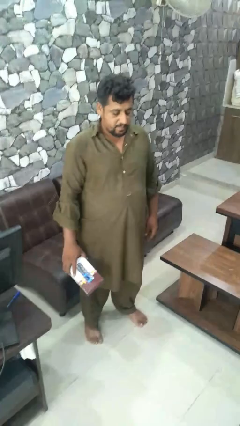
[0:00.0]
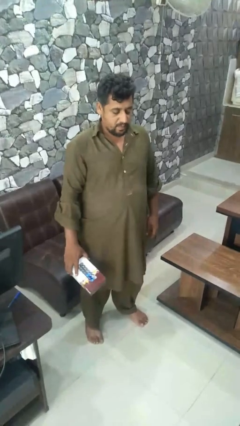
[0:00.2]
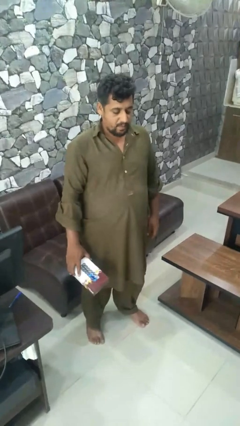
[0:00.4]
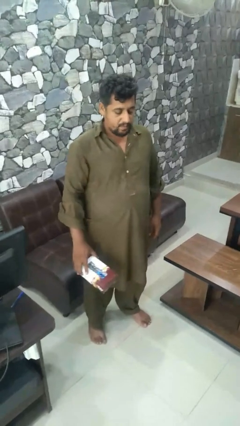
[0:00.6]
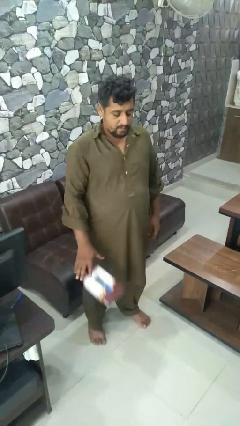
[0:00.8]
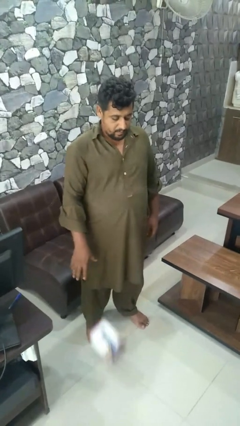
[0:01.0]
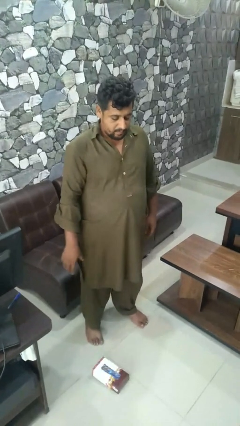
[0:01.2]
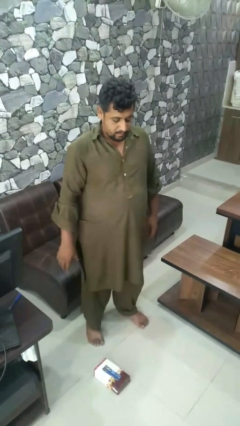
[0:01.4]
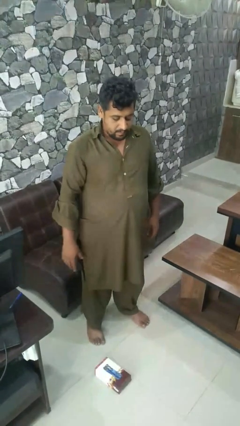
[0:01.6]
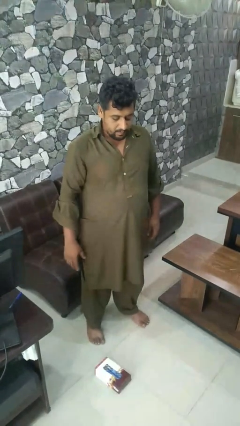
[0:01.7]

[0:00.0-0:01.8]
person throws object to ground

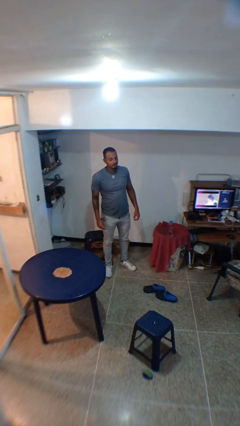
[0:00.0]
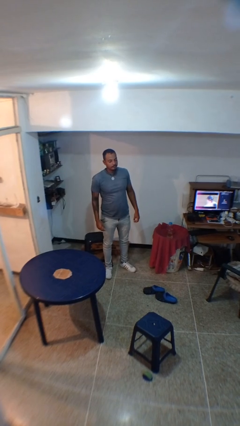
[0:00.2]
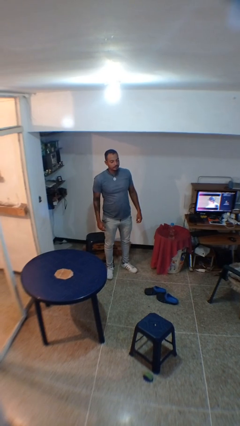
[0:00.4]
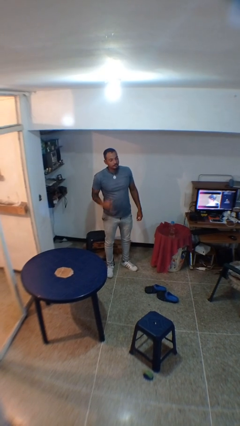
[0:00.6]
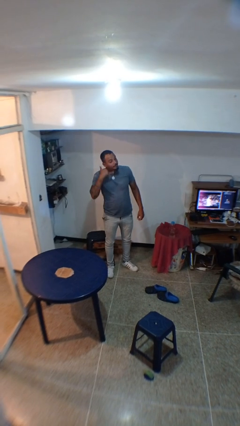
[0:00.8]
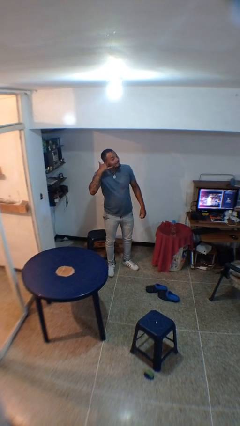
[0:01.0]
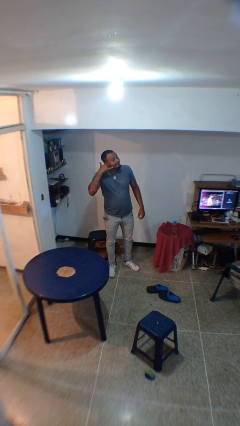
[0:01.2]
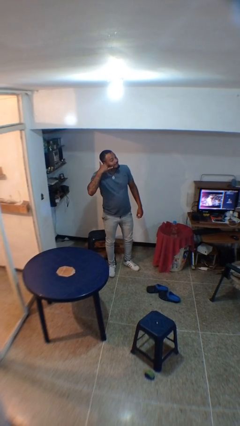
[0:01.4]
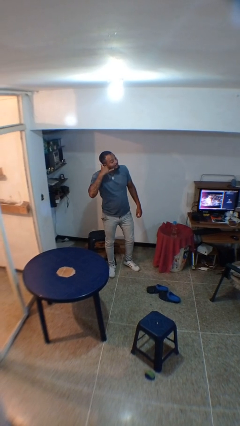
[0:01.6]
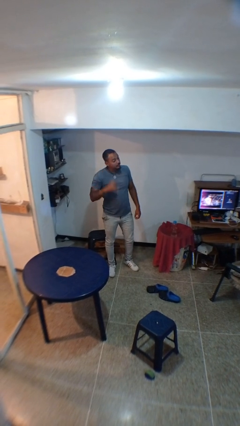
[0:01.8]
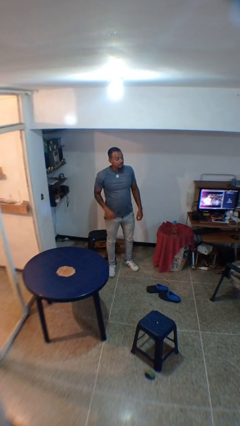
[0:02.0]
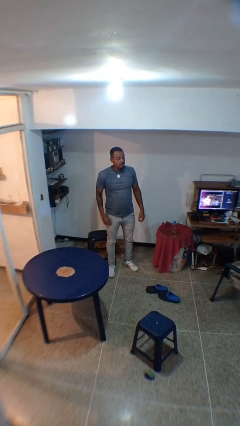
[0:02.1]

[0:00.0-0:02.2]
person gestures call me

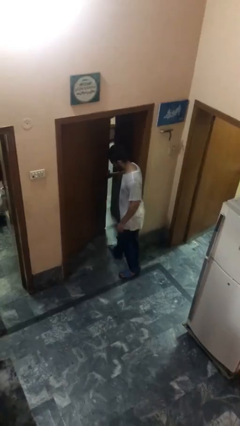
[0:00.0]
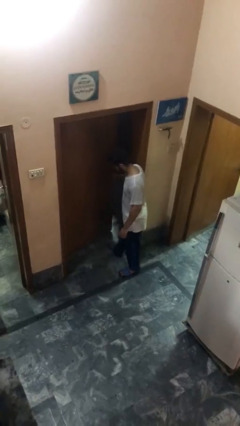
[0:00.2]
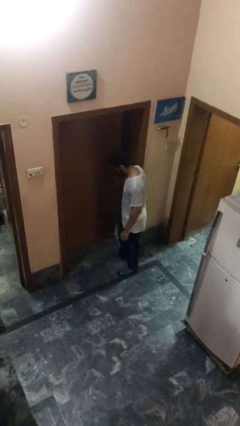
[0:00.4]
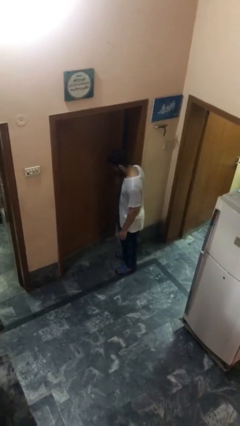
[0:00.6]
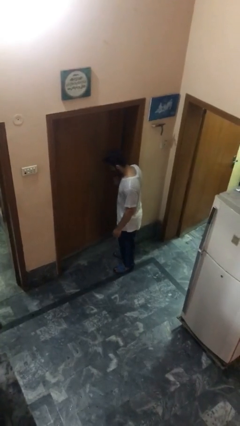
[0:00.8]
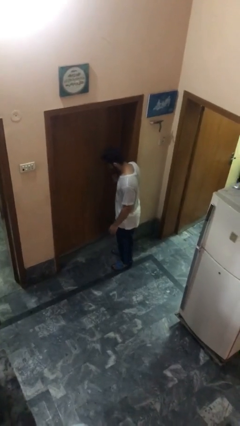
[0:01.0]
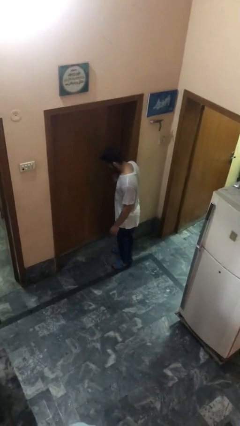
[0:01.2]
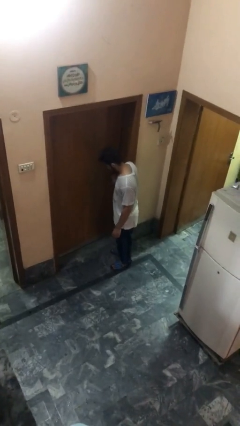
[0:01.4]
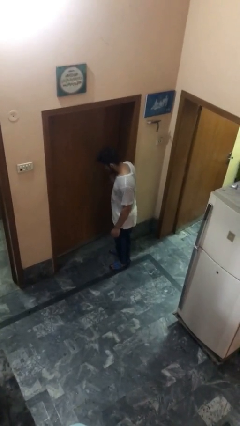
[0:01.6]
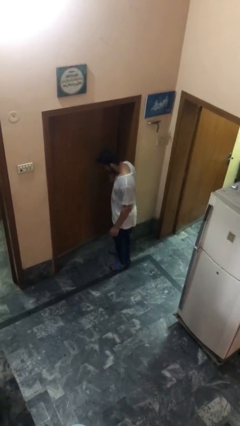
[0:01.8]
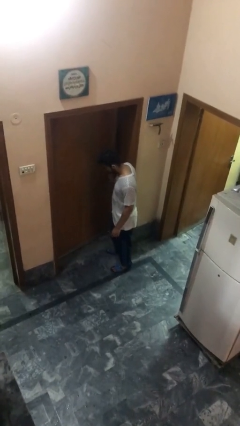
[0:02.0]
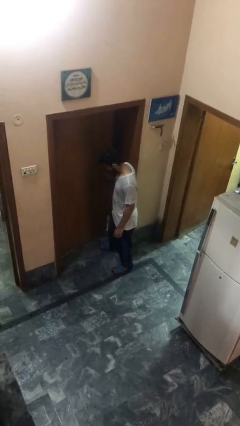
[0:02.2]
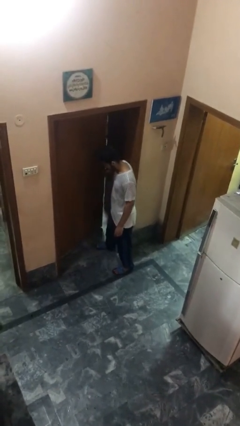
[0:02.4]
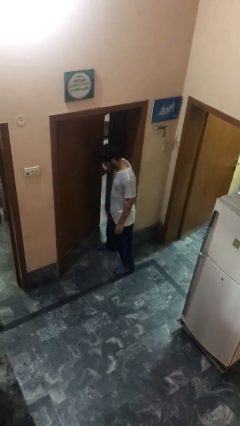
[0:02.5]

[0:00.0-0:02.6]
person closes facility door

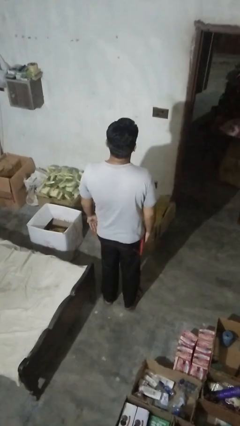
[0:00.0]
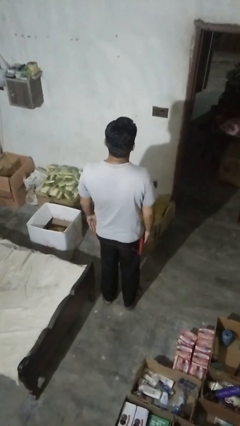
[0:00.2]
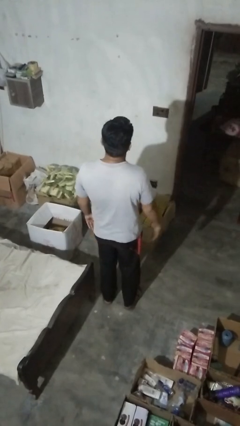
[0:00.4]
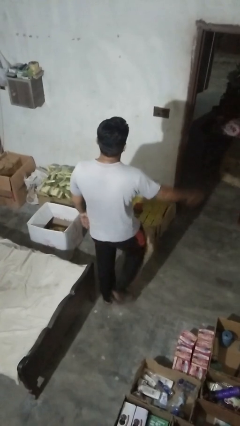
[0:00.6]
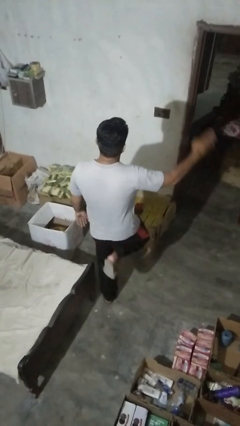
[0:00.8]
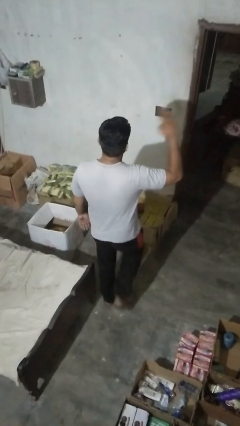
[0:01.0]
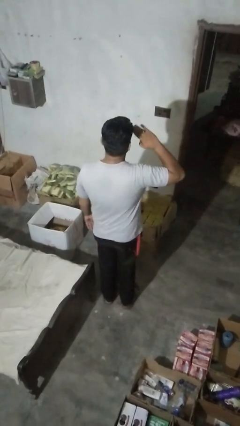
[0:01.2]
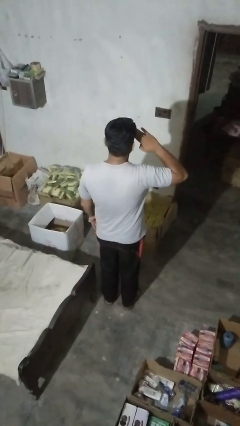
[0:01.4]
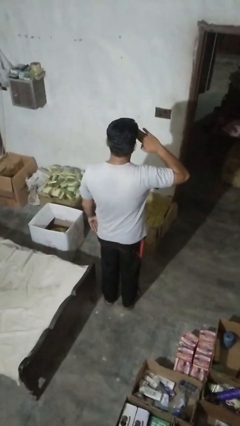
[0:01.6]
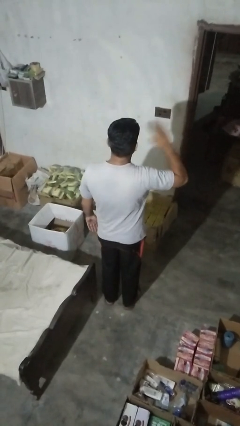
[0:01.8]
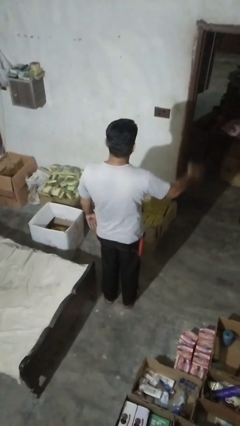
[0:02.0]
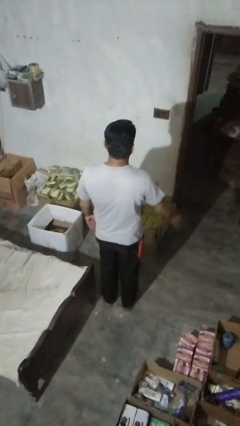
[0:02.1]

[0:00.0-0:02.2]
person salutes

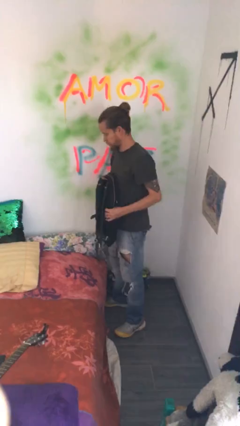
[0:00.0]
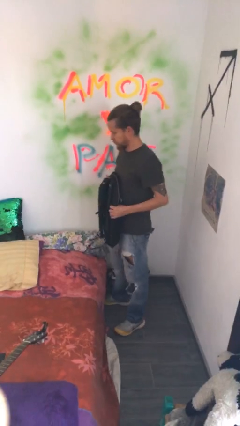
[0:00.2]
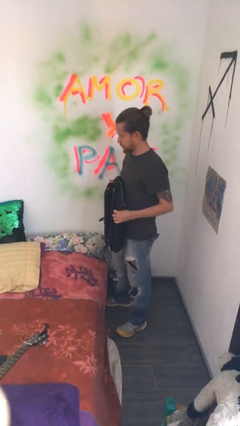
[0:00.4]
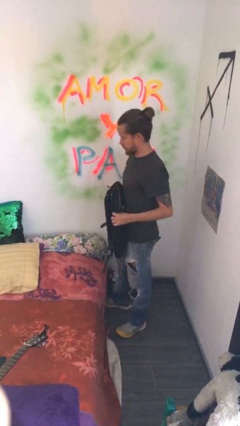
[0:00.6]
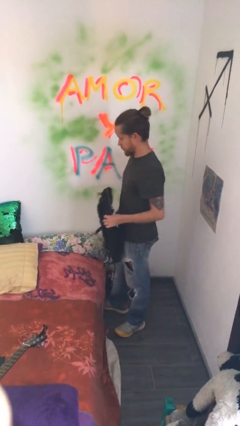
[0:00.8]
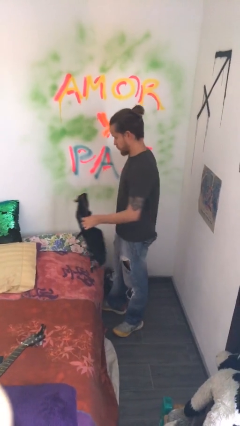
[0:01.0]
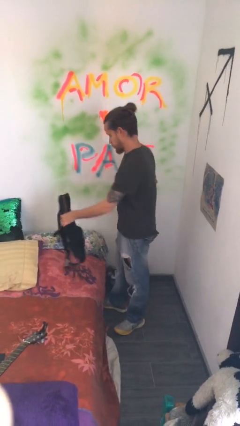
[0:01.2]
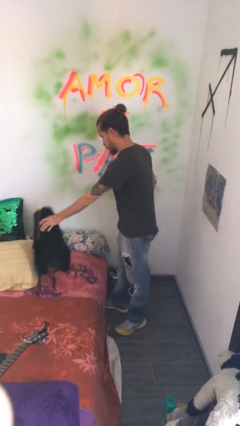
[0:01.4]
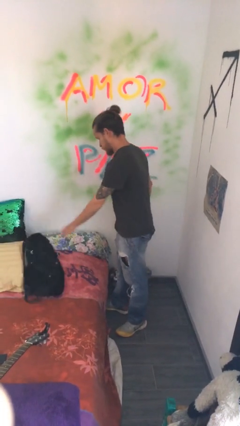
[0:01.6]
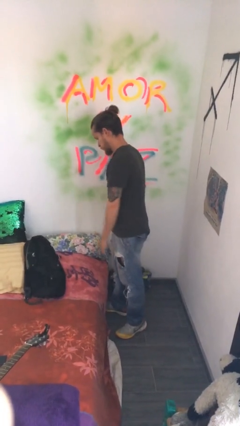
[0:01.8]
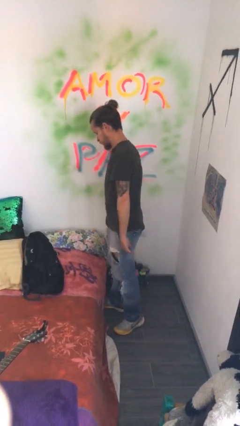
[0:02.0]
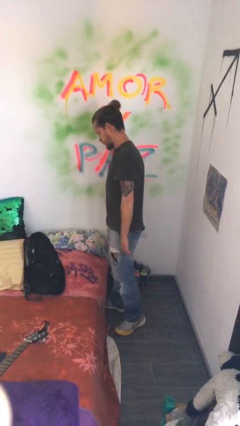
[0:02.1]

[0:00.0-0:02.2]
person puts down object on bed

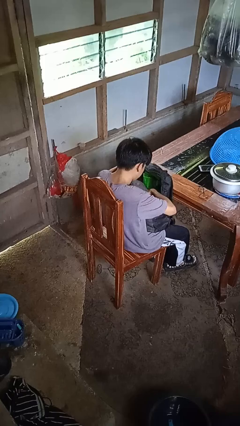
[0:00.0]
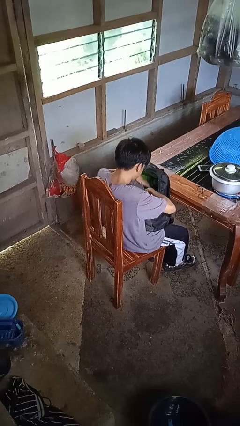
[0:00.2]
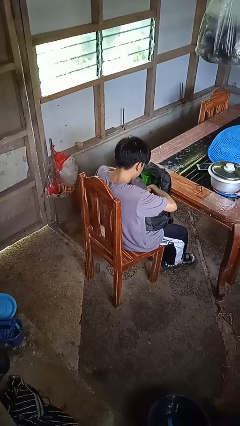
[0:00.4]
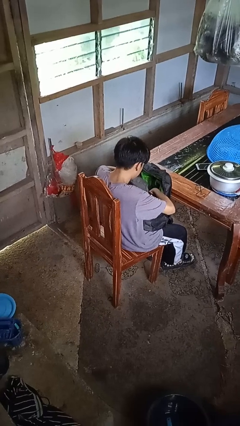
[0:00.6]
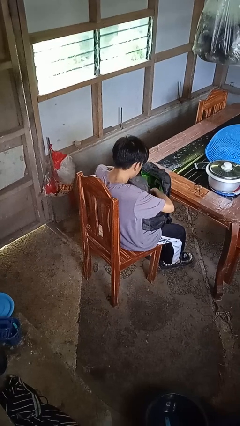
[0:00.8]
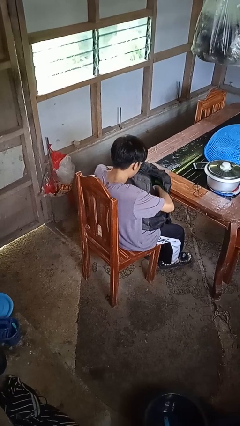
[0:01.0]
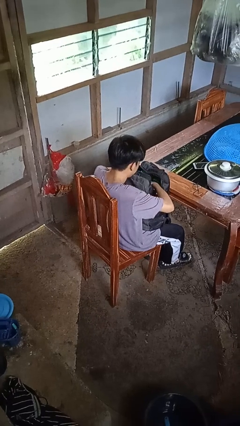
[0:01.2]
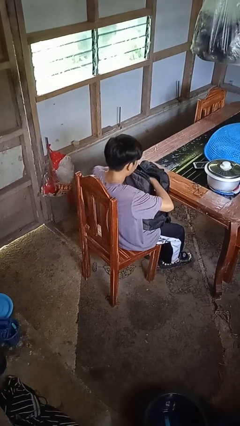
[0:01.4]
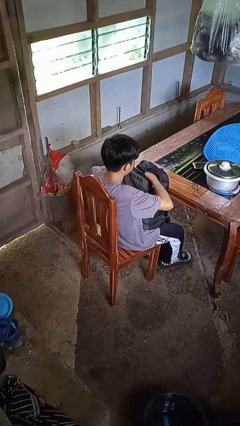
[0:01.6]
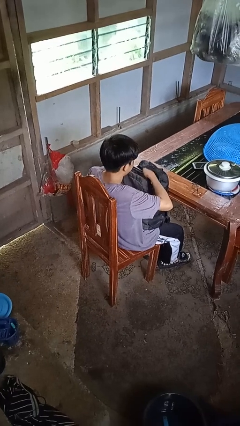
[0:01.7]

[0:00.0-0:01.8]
person takes object from backpack

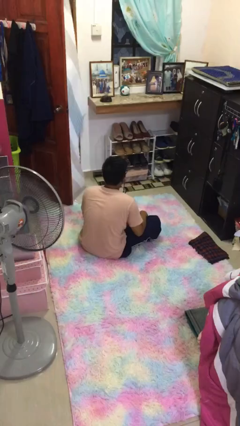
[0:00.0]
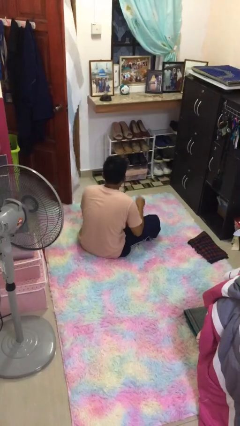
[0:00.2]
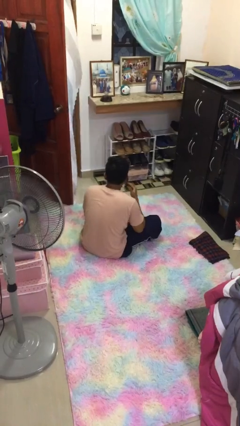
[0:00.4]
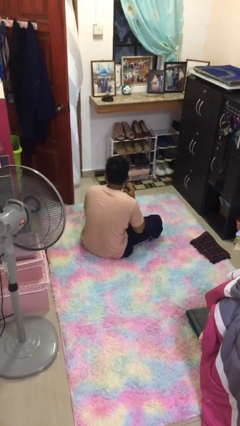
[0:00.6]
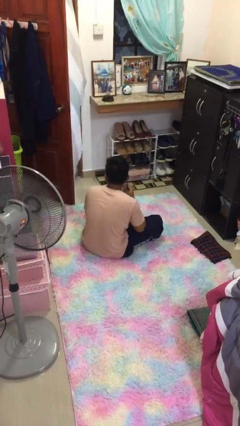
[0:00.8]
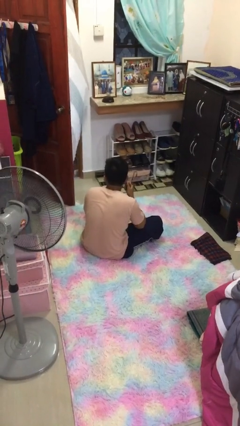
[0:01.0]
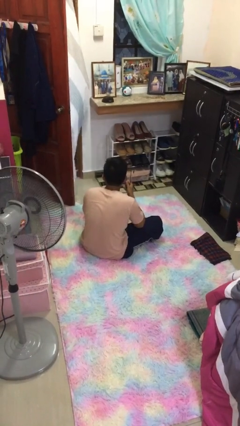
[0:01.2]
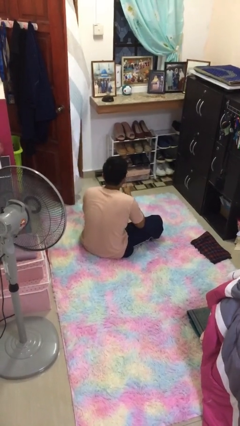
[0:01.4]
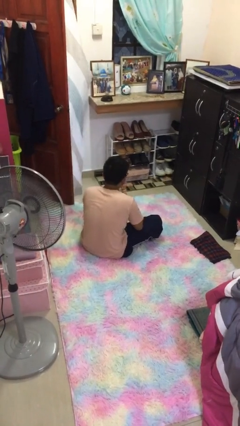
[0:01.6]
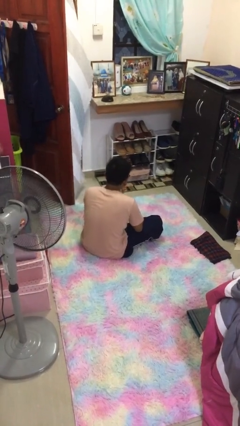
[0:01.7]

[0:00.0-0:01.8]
person takes off earrings

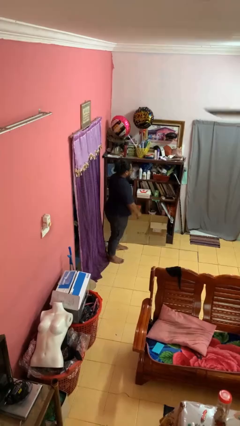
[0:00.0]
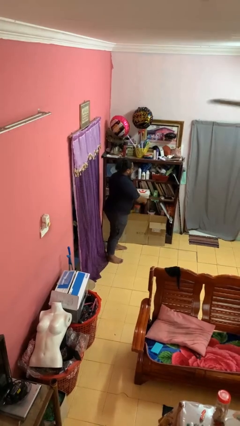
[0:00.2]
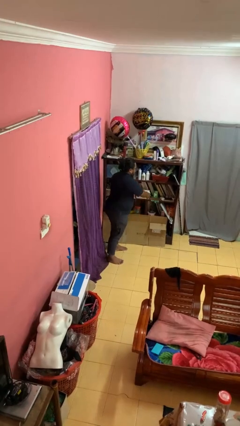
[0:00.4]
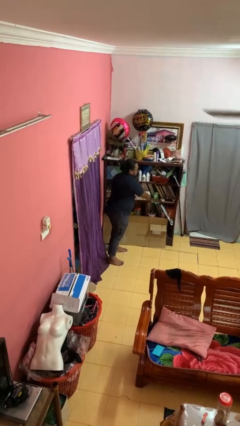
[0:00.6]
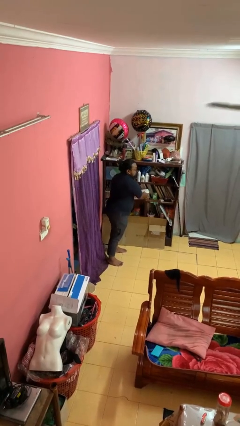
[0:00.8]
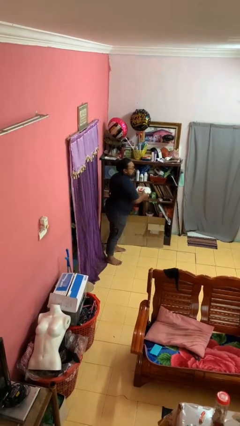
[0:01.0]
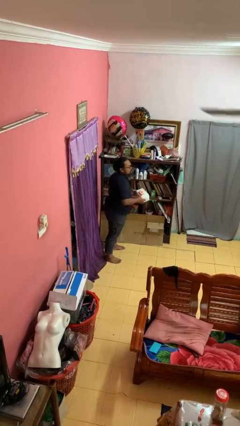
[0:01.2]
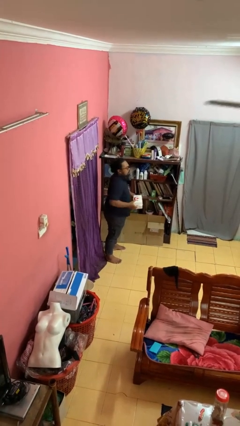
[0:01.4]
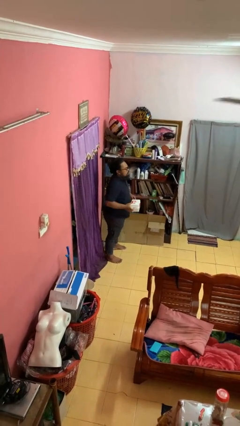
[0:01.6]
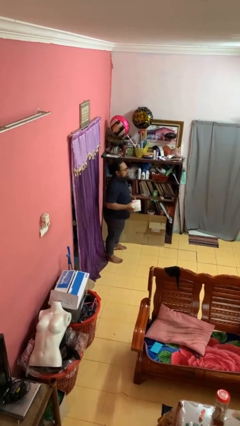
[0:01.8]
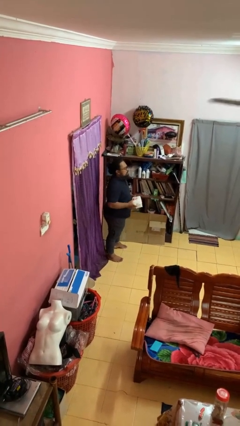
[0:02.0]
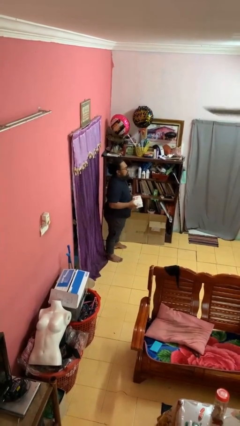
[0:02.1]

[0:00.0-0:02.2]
person takes object from cabinet
